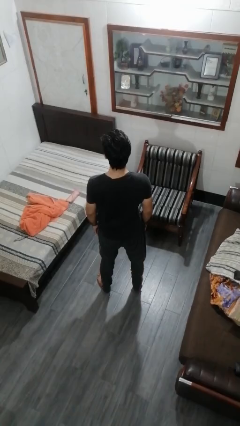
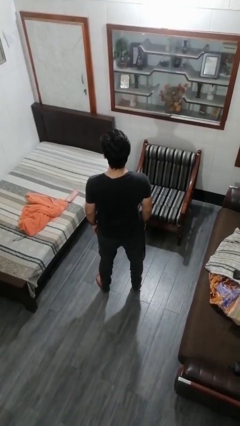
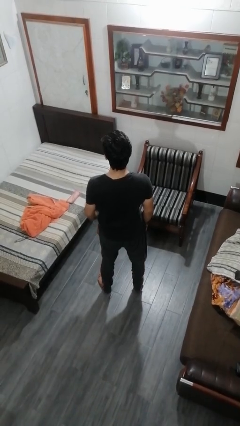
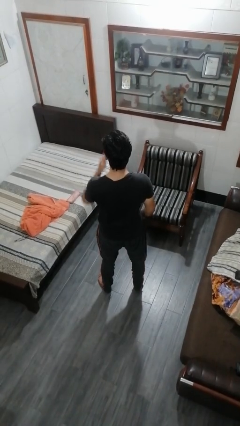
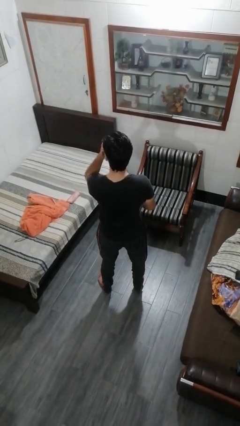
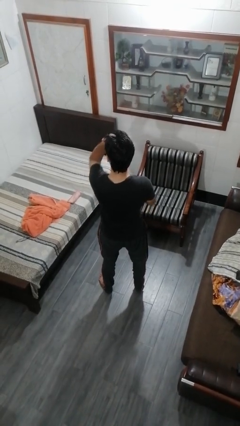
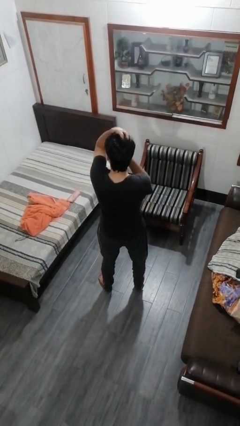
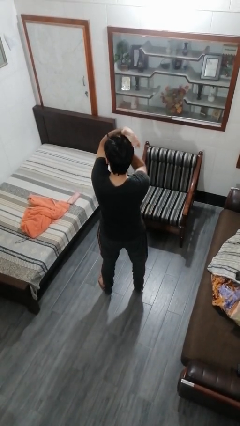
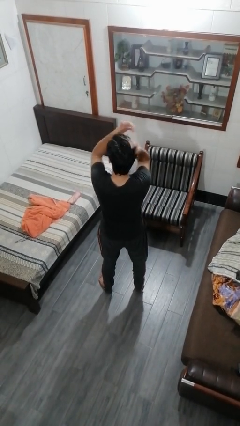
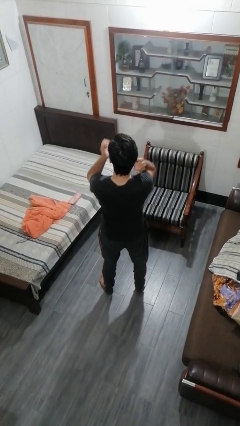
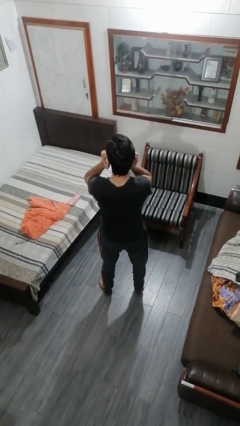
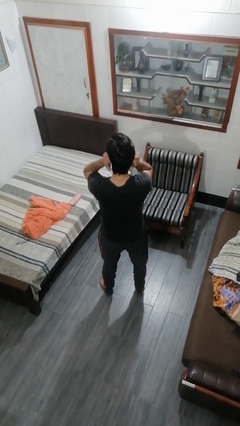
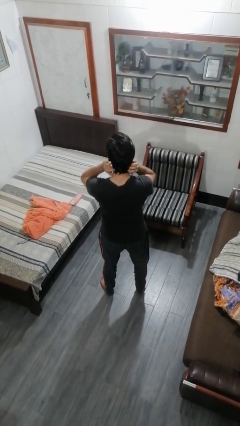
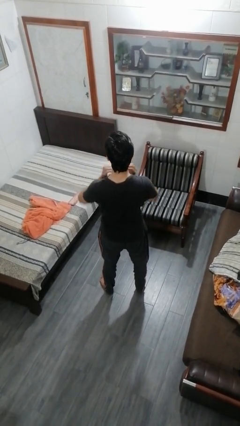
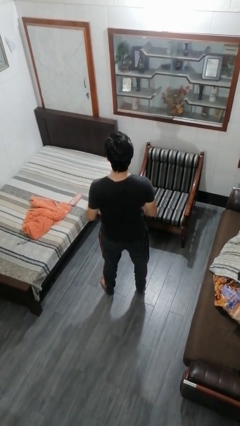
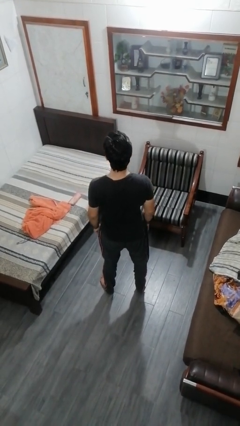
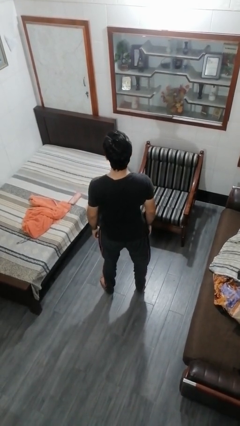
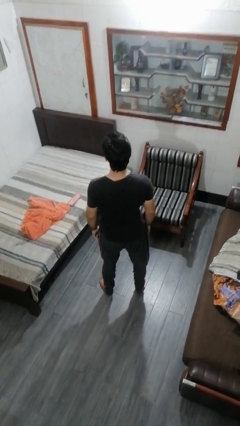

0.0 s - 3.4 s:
person strokes hair

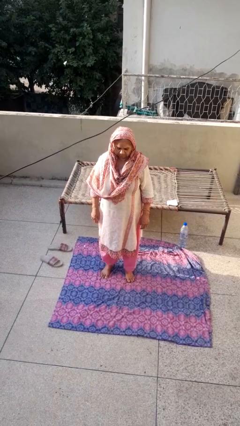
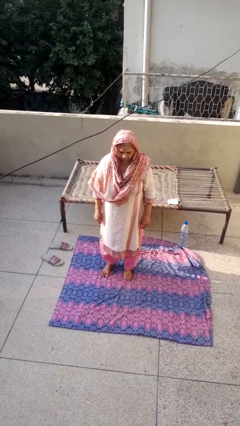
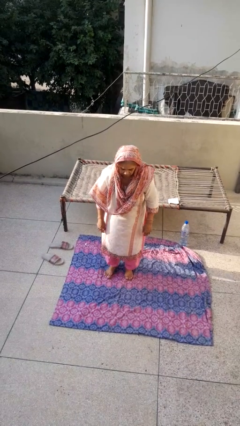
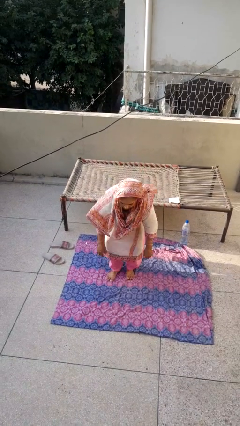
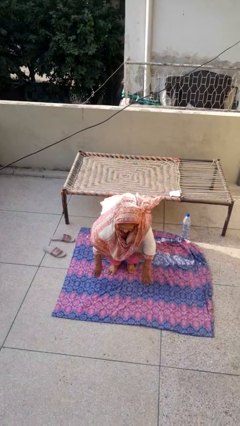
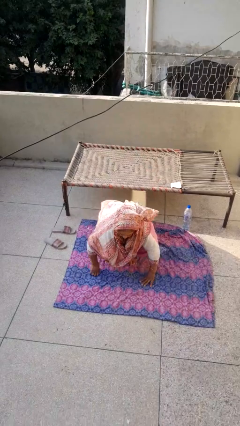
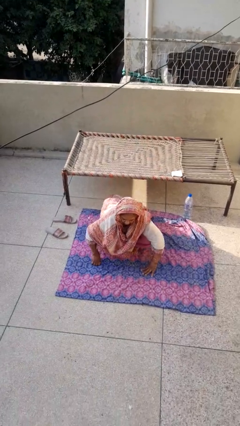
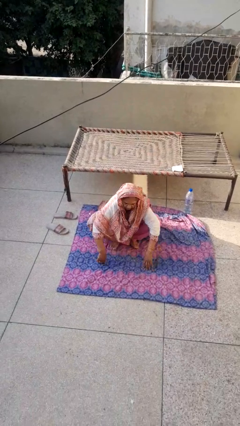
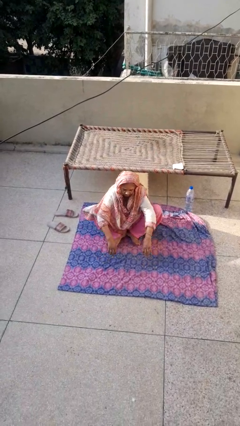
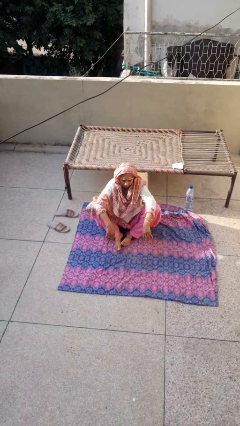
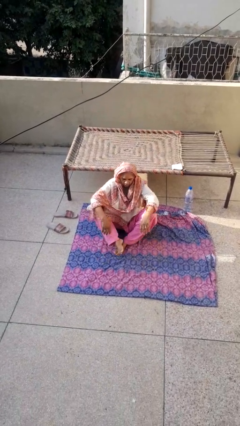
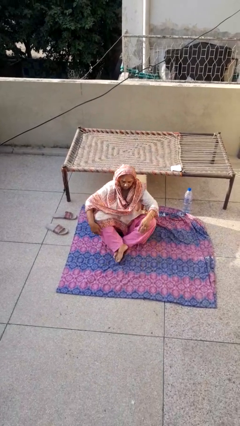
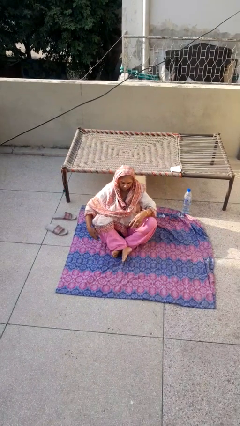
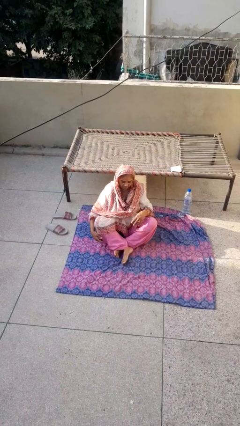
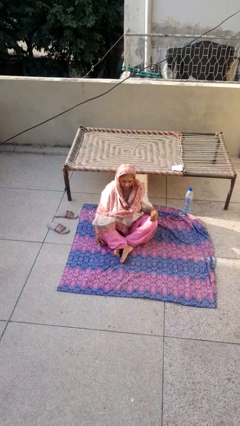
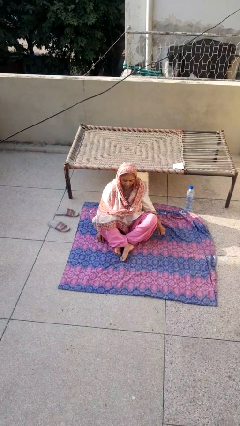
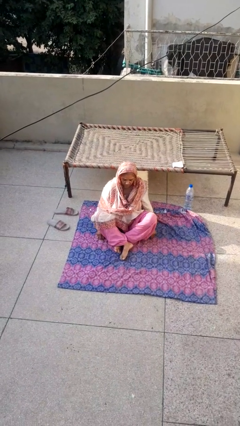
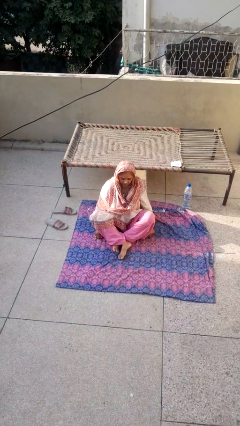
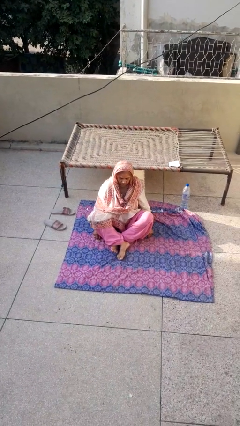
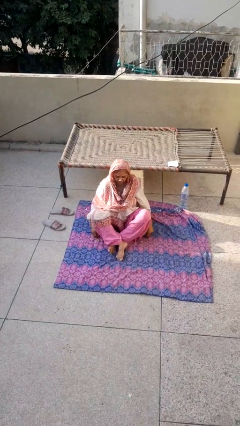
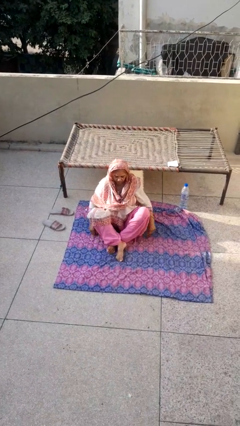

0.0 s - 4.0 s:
person sits crisscross

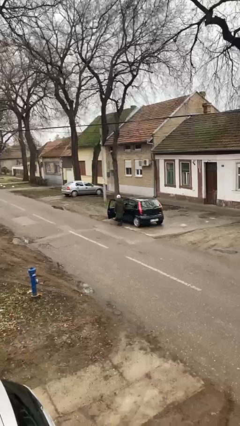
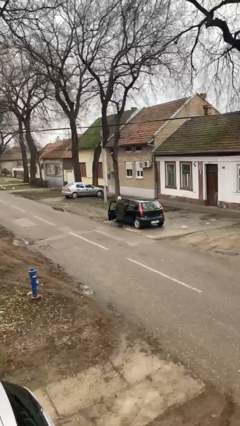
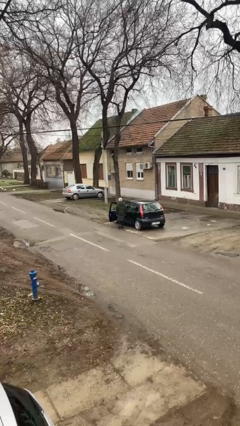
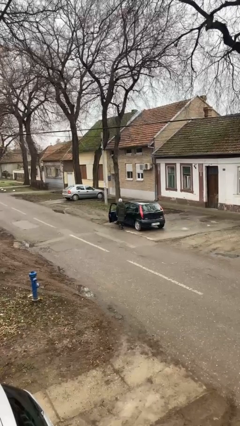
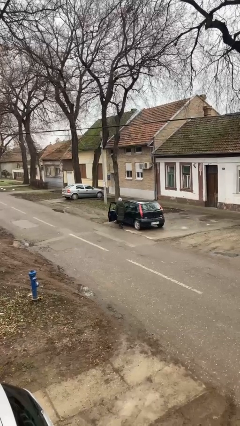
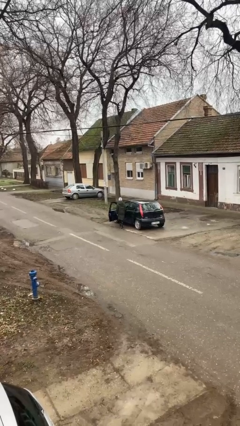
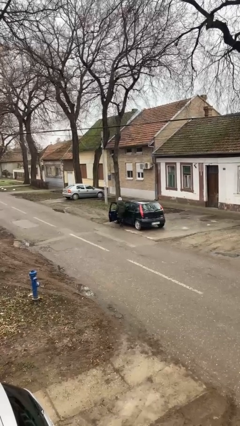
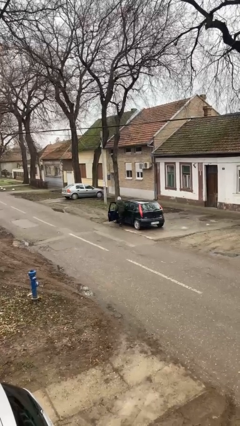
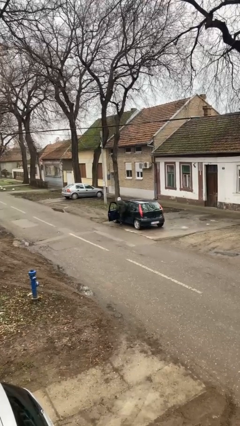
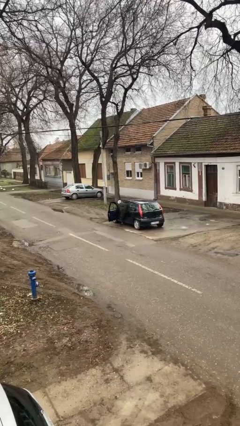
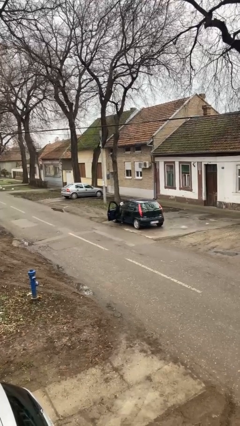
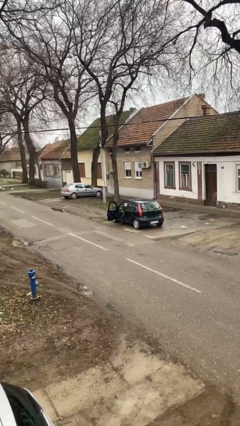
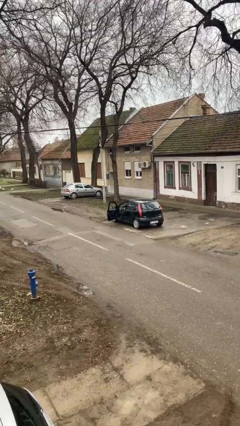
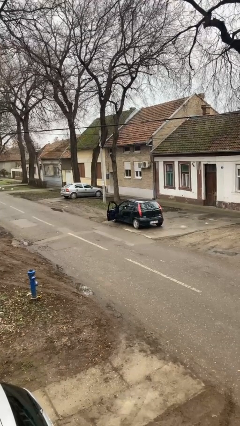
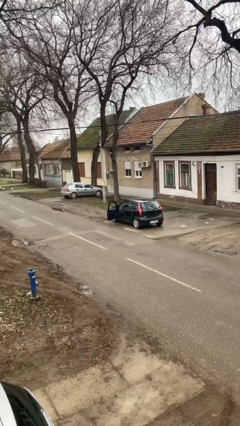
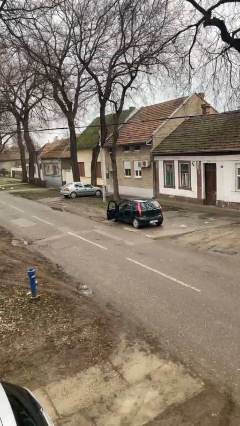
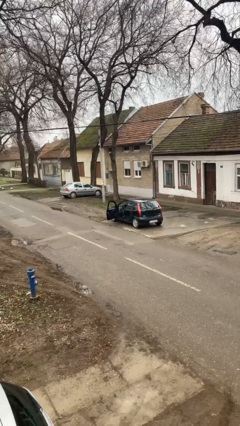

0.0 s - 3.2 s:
person enters car

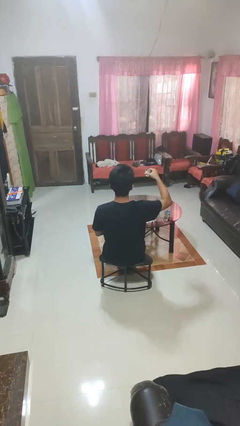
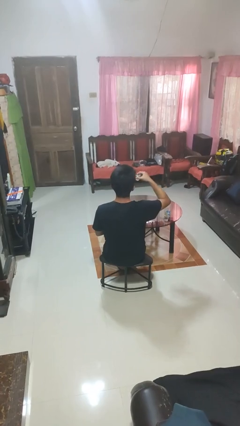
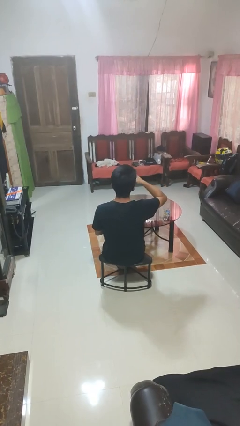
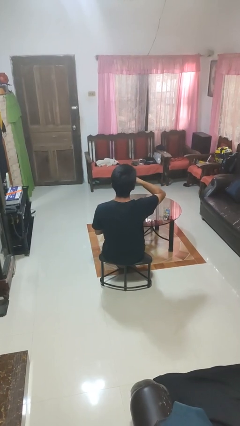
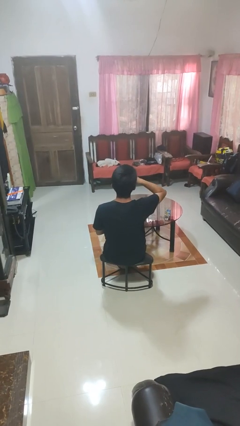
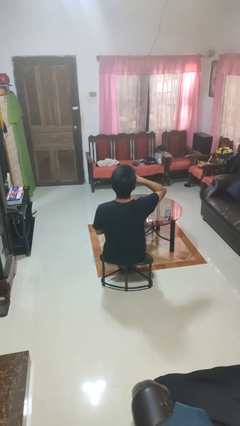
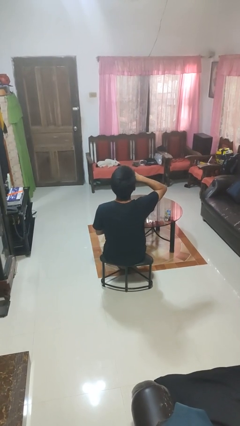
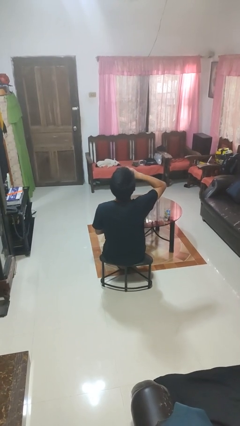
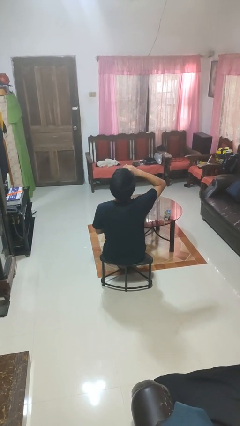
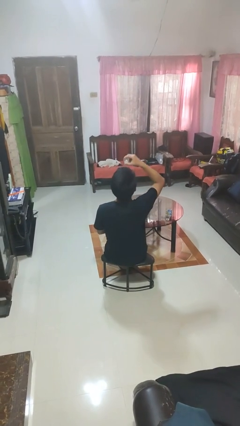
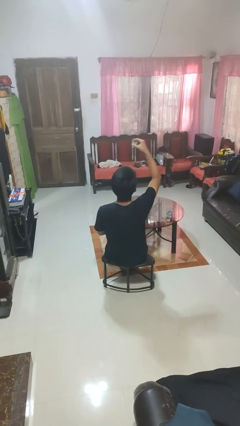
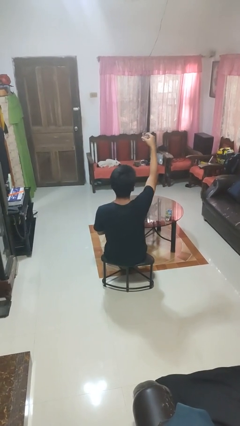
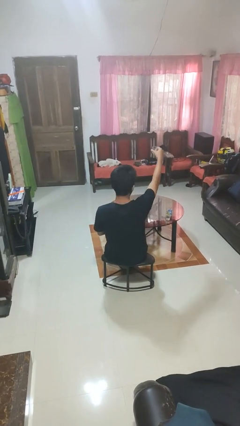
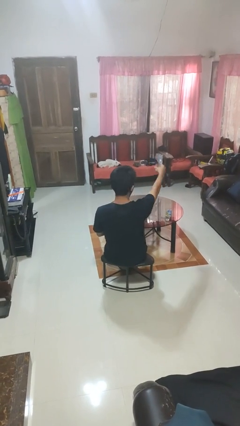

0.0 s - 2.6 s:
person drinks from shotglass

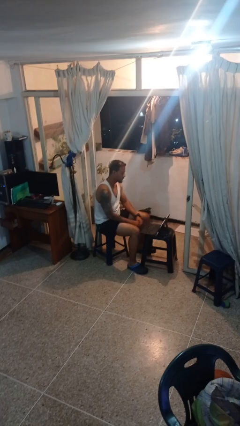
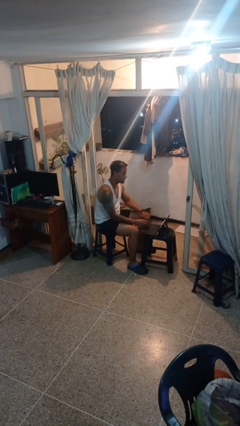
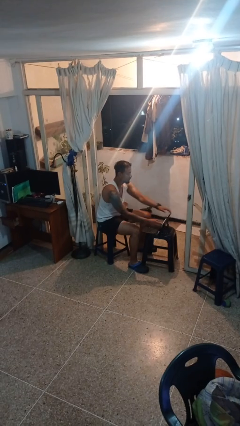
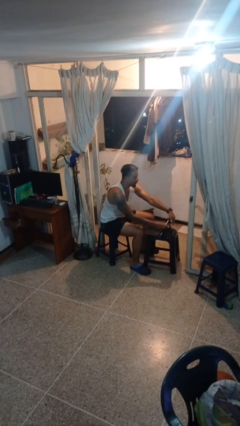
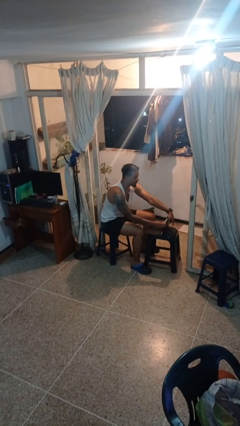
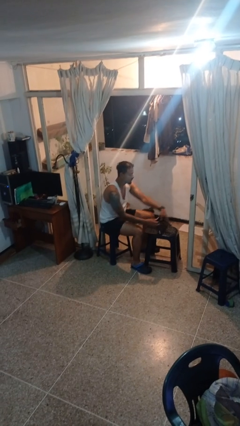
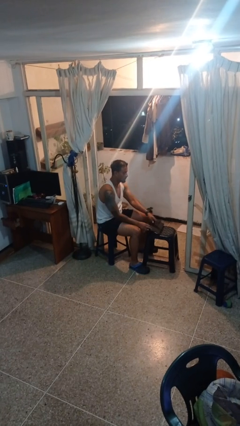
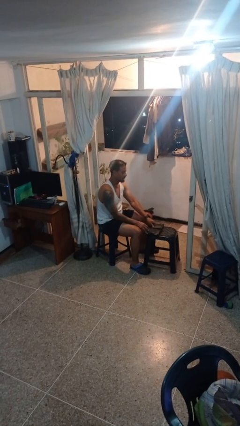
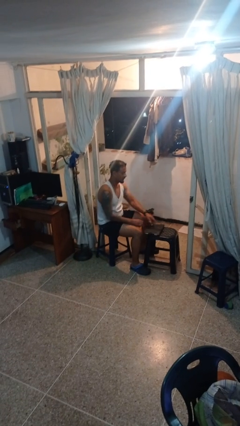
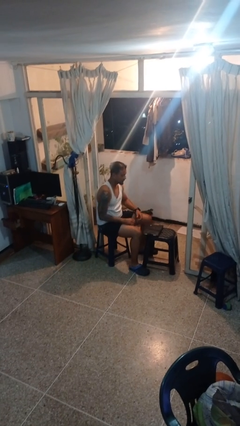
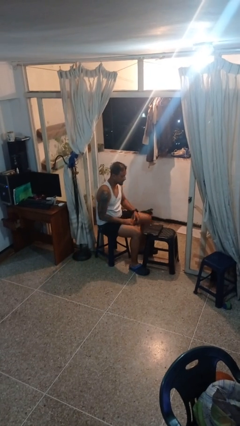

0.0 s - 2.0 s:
person closes laptop

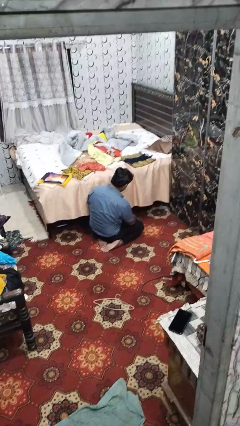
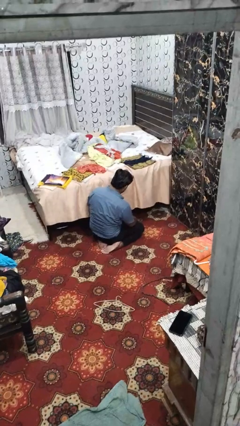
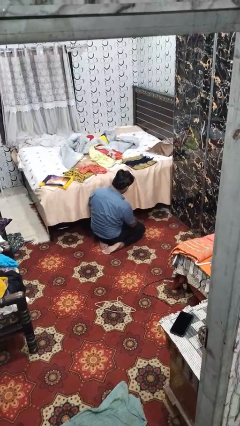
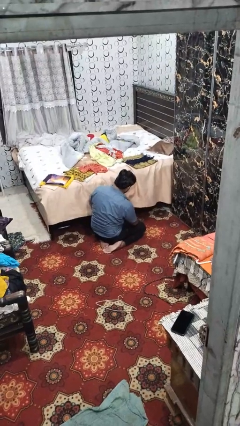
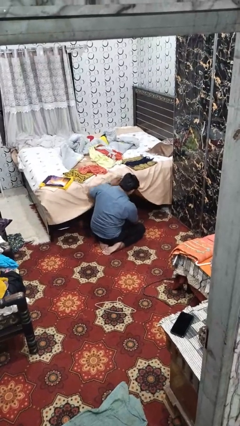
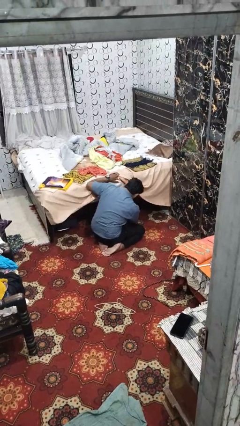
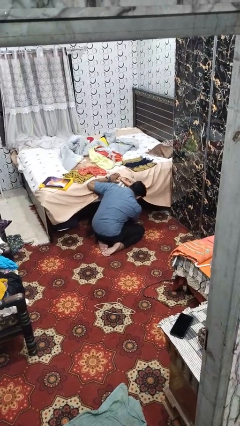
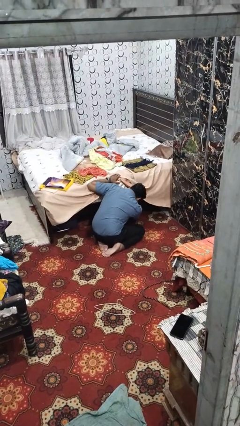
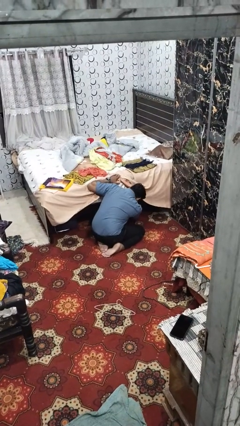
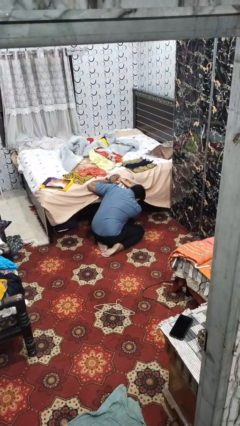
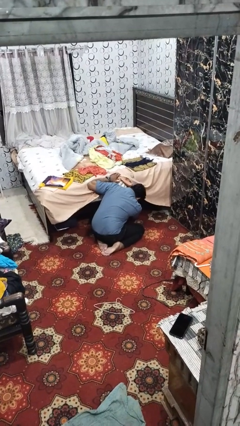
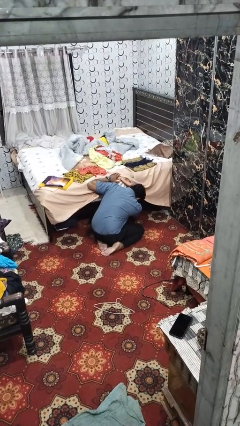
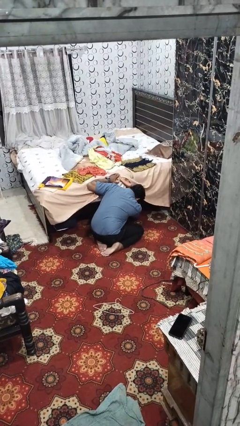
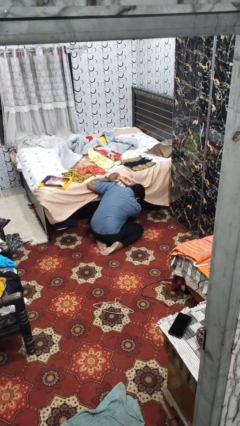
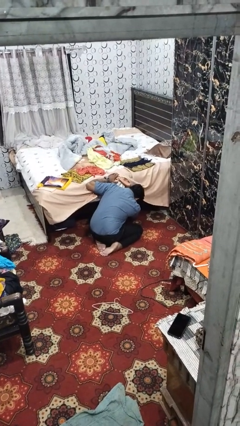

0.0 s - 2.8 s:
person searches under bed
